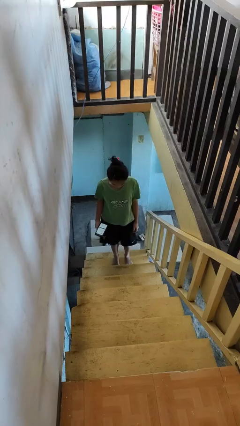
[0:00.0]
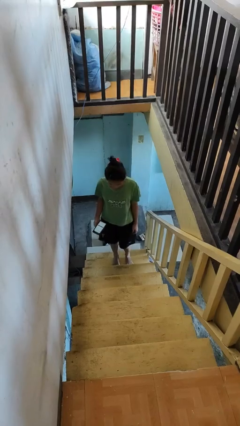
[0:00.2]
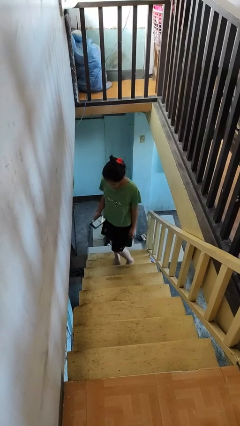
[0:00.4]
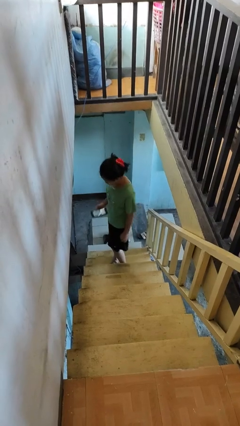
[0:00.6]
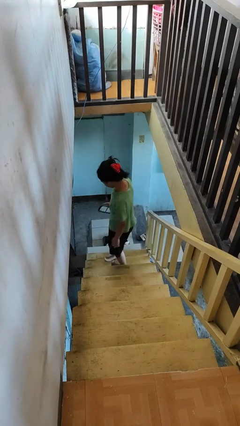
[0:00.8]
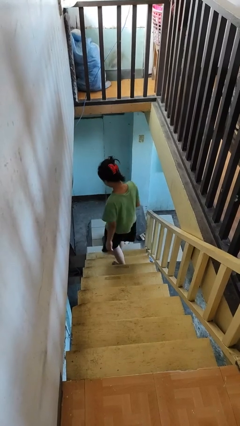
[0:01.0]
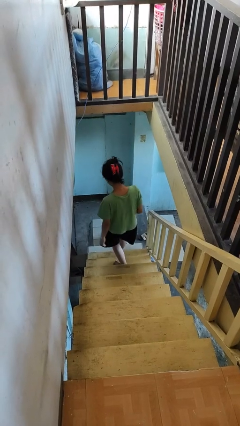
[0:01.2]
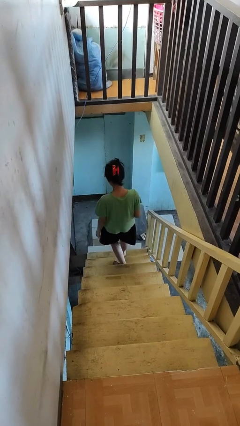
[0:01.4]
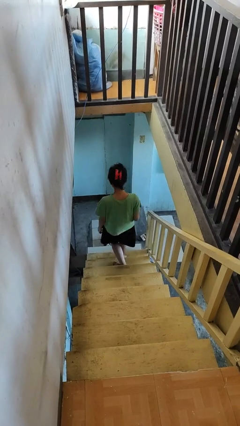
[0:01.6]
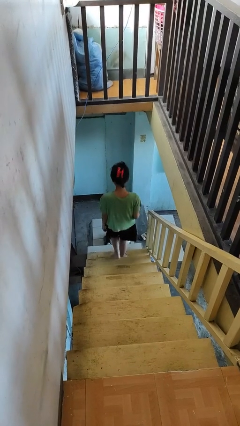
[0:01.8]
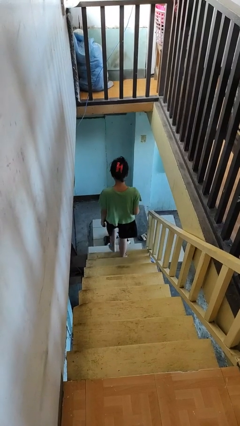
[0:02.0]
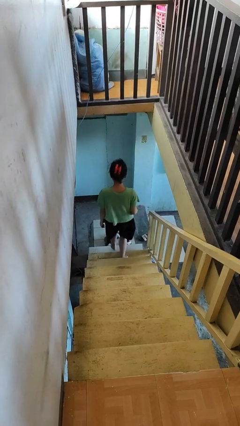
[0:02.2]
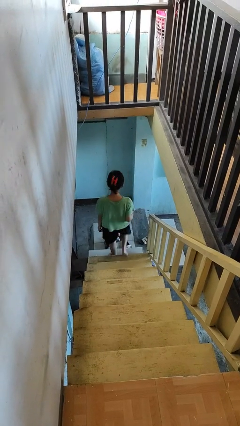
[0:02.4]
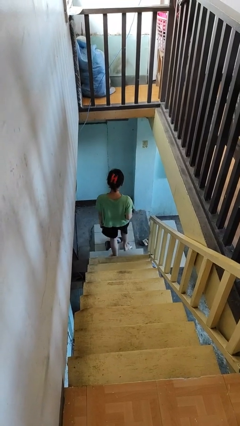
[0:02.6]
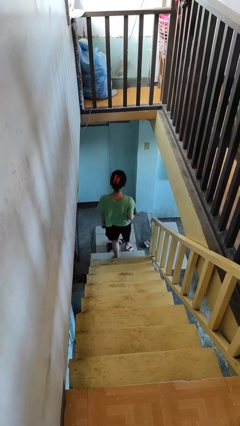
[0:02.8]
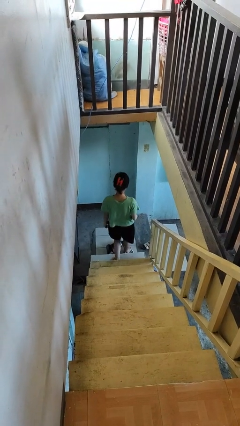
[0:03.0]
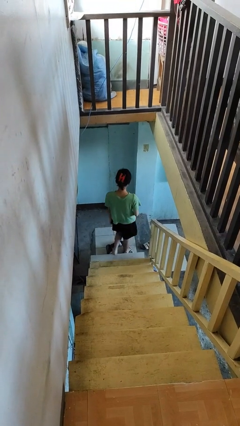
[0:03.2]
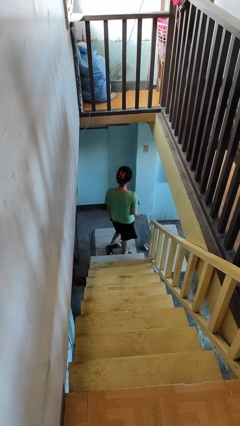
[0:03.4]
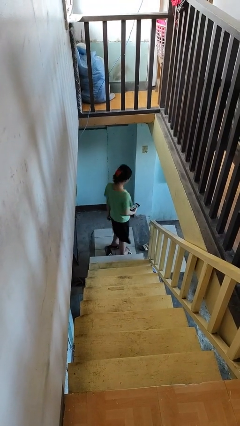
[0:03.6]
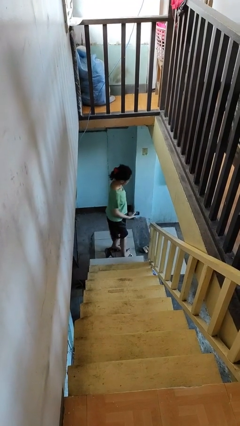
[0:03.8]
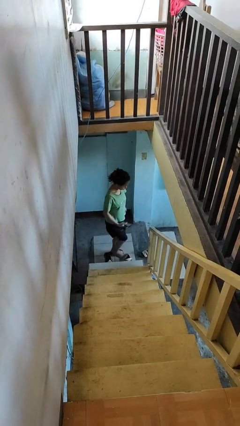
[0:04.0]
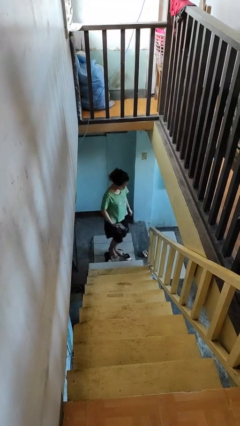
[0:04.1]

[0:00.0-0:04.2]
person climbs down stairs

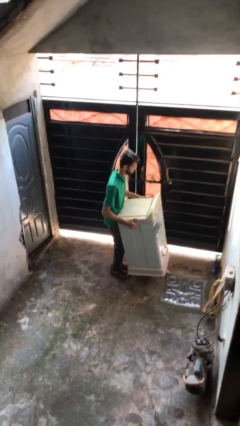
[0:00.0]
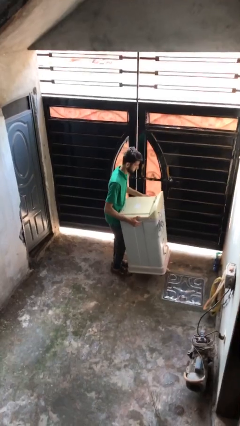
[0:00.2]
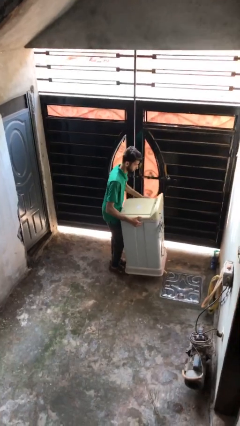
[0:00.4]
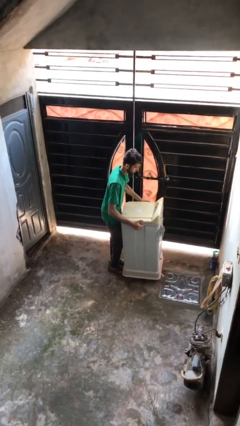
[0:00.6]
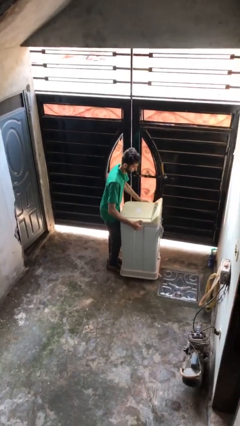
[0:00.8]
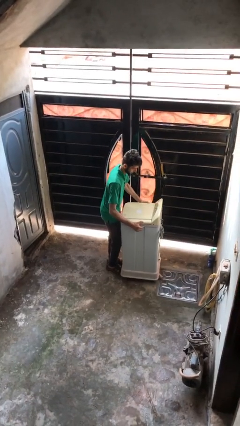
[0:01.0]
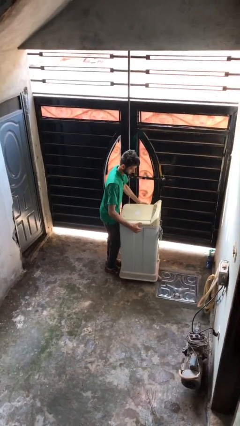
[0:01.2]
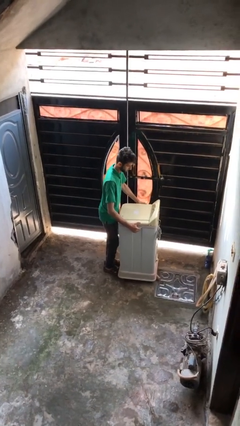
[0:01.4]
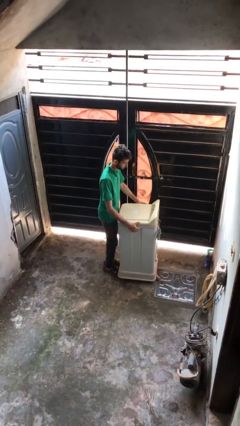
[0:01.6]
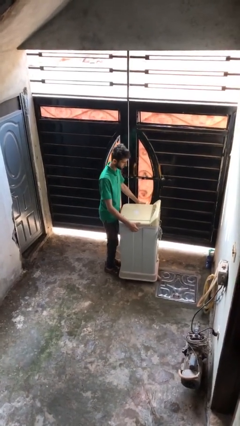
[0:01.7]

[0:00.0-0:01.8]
person puts down object on floor

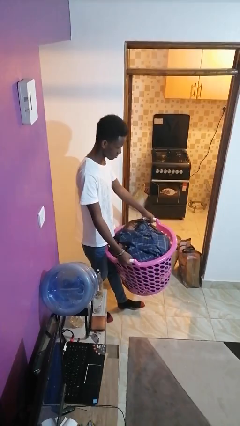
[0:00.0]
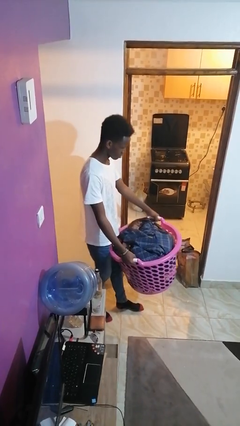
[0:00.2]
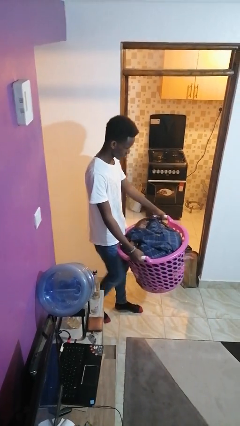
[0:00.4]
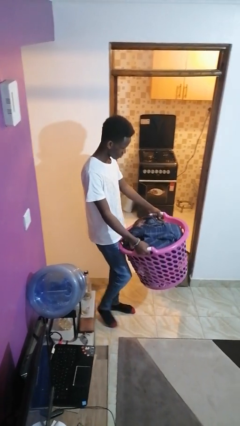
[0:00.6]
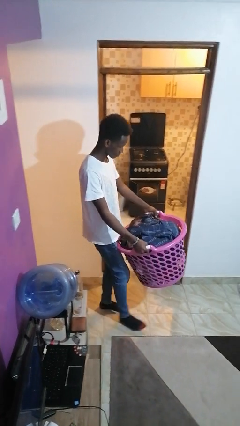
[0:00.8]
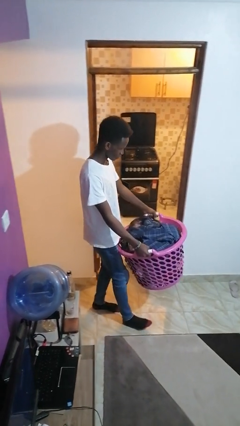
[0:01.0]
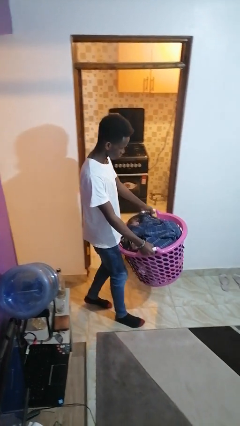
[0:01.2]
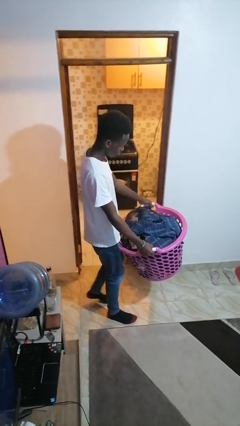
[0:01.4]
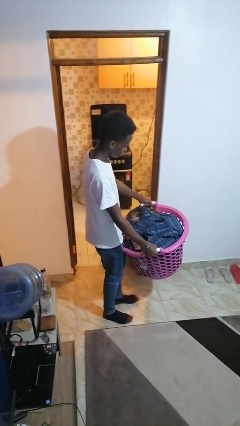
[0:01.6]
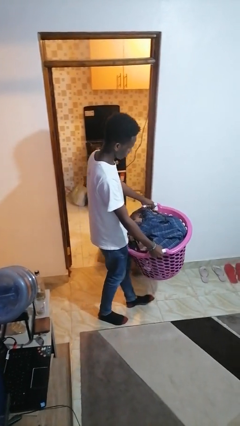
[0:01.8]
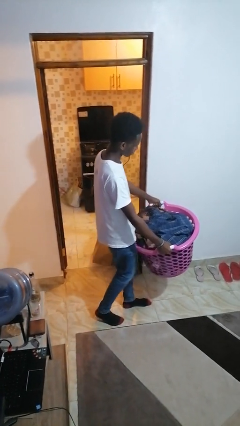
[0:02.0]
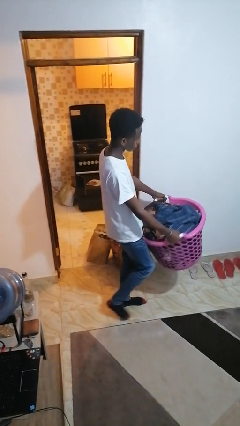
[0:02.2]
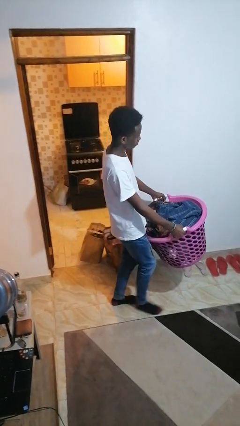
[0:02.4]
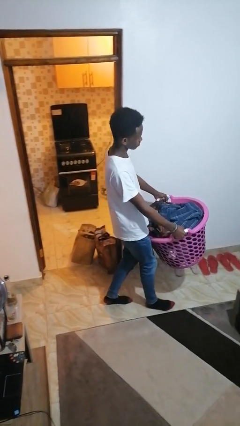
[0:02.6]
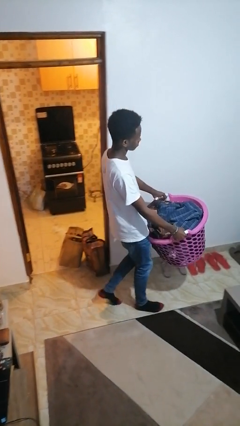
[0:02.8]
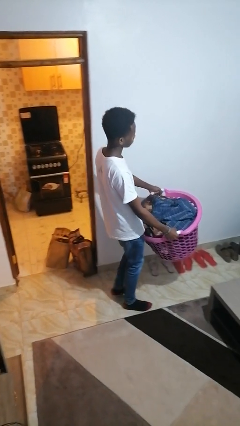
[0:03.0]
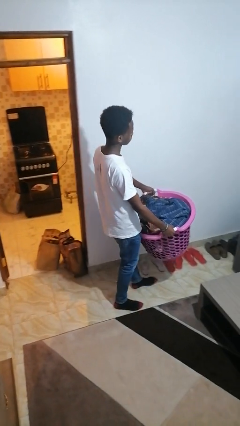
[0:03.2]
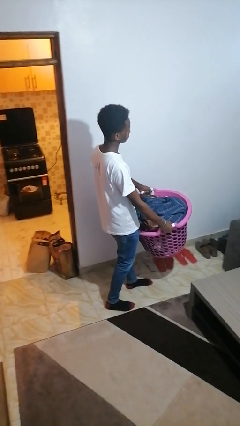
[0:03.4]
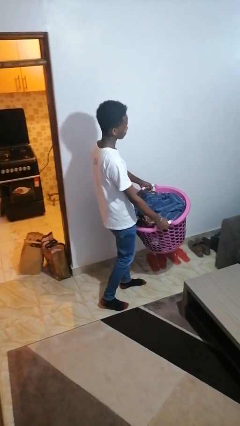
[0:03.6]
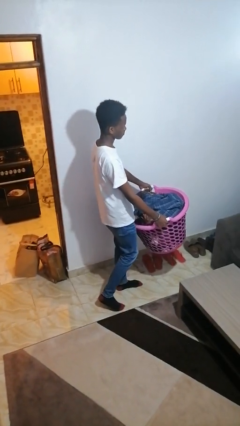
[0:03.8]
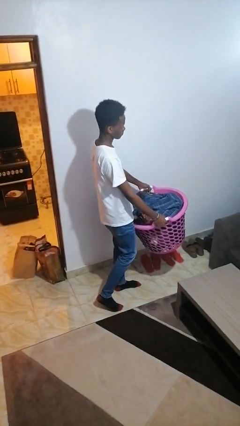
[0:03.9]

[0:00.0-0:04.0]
person carries laundry basket

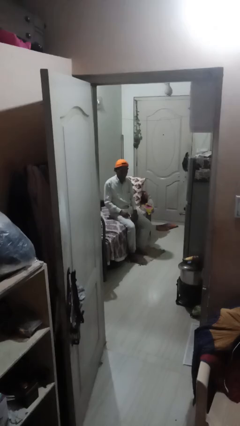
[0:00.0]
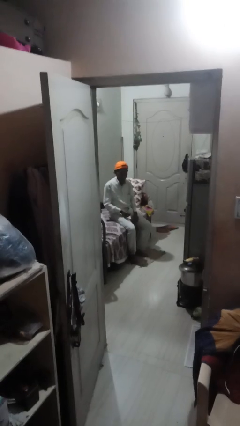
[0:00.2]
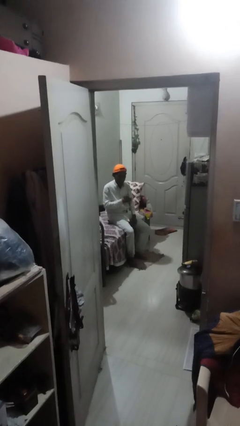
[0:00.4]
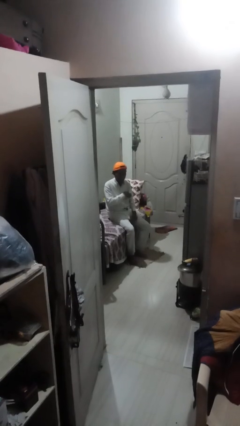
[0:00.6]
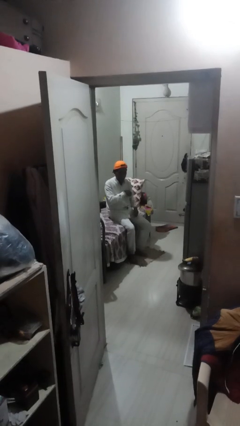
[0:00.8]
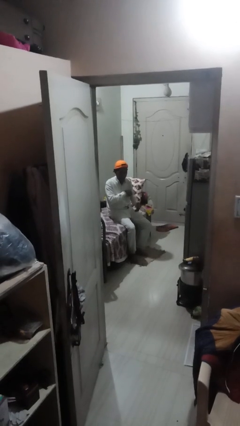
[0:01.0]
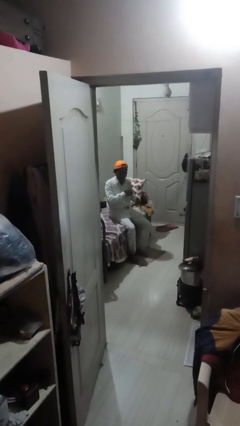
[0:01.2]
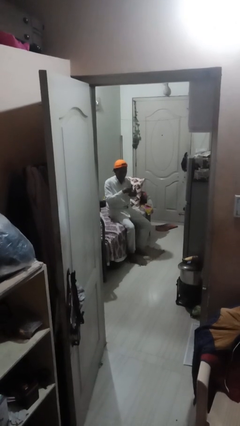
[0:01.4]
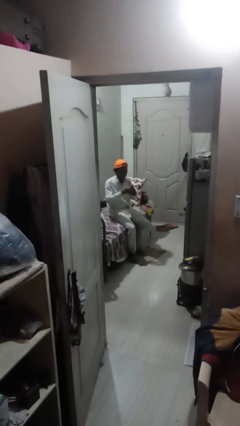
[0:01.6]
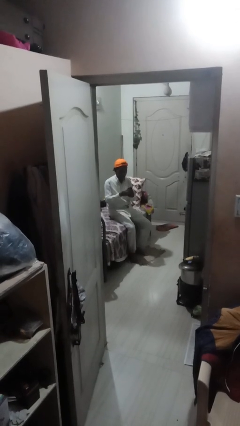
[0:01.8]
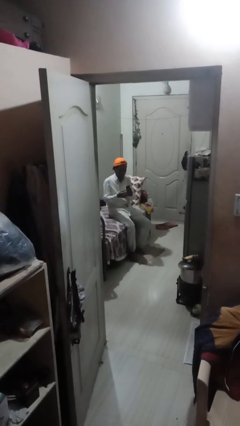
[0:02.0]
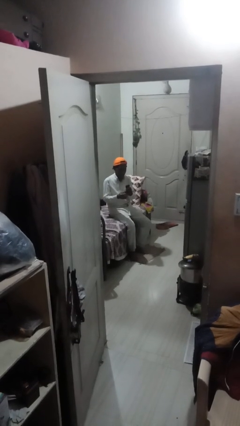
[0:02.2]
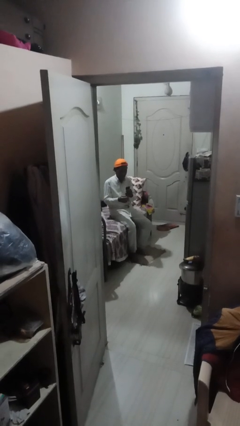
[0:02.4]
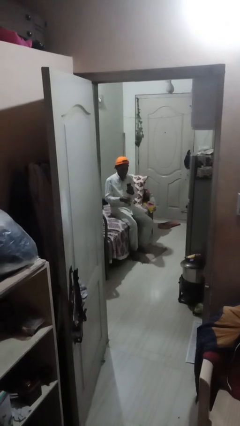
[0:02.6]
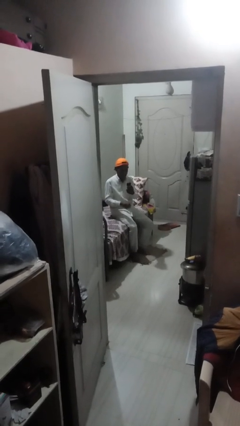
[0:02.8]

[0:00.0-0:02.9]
person takes phone from pocket

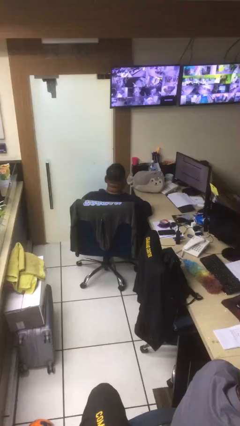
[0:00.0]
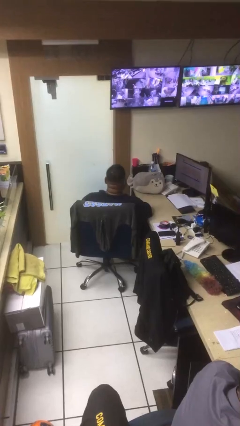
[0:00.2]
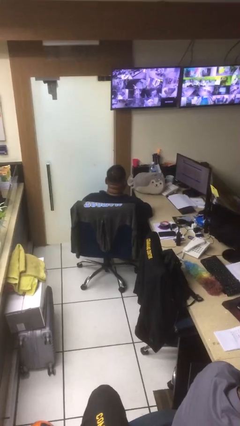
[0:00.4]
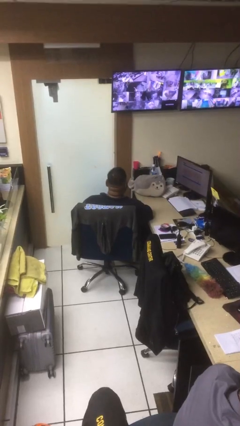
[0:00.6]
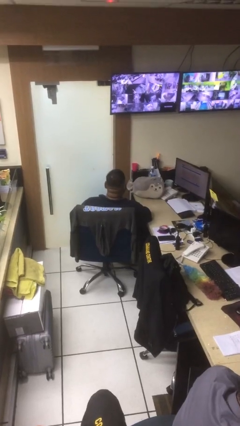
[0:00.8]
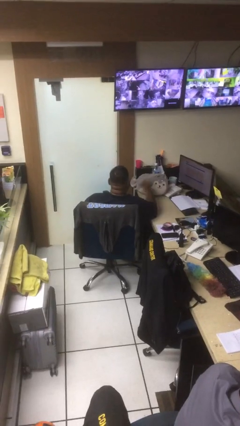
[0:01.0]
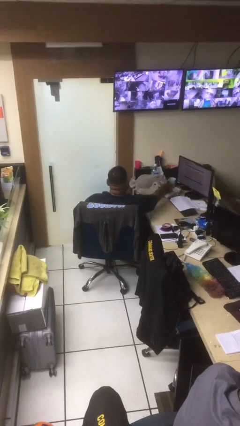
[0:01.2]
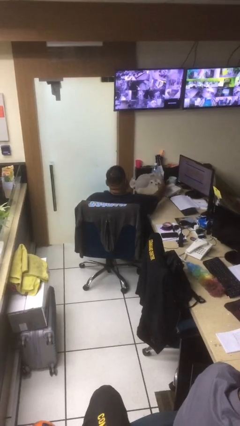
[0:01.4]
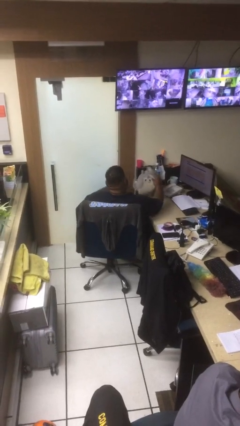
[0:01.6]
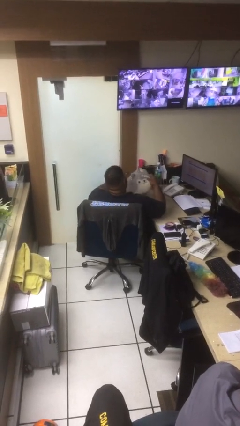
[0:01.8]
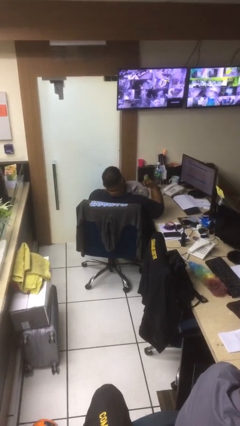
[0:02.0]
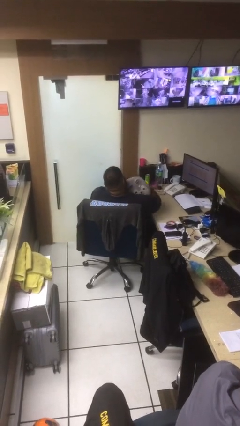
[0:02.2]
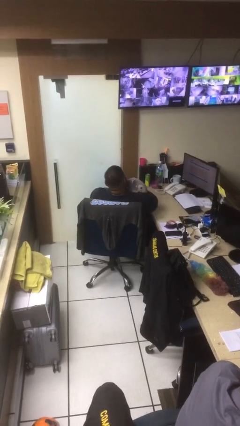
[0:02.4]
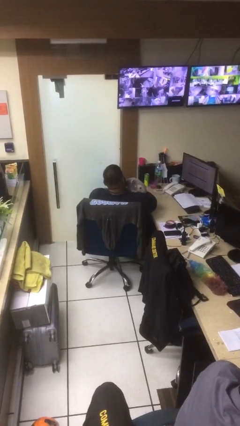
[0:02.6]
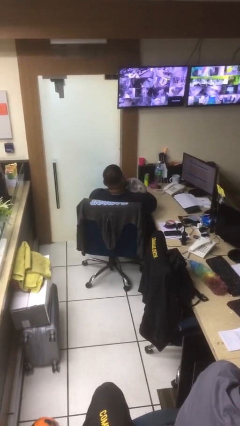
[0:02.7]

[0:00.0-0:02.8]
person hugs stuffed animal

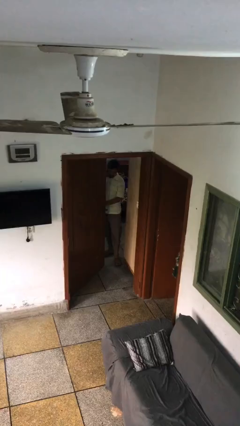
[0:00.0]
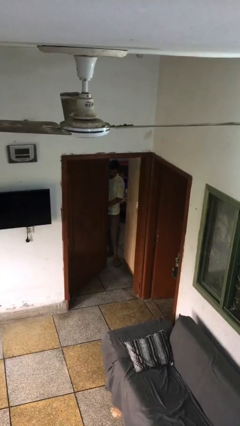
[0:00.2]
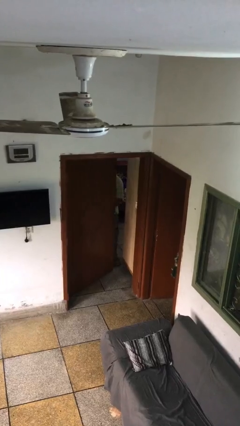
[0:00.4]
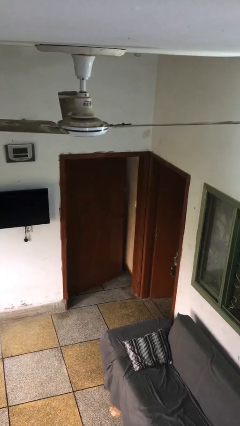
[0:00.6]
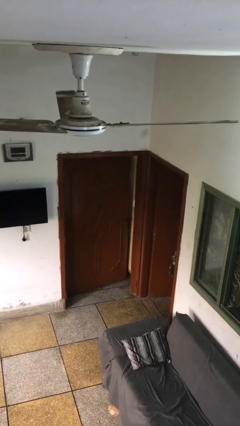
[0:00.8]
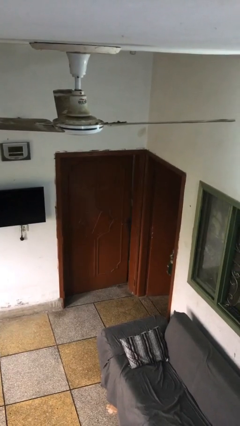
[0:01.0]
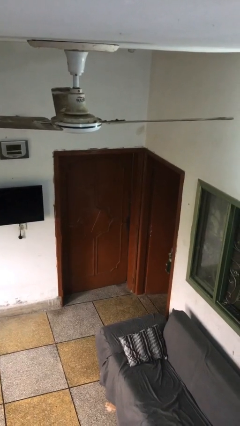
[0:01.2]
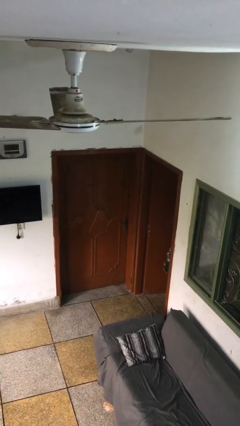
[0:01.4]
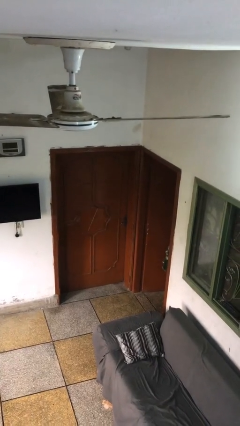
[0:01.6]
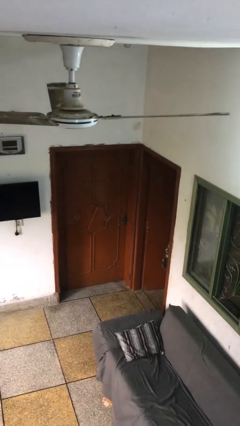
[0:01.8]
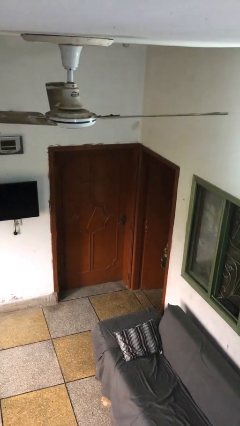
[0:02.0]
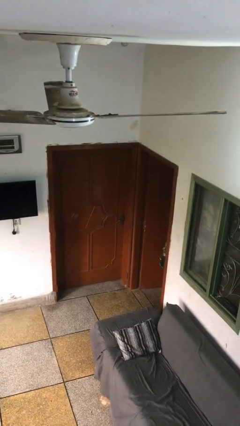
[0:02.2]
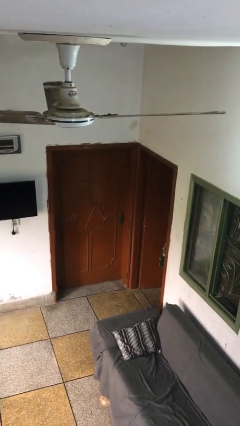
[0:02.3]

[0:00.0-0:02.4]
person closes facility door
